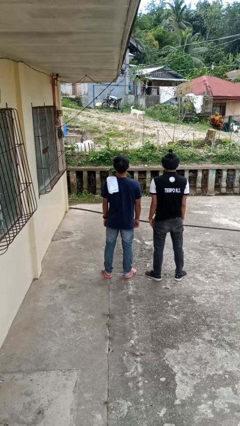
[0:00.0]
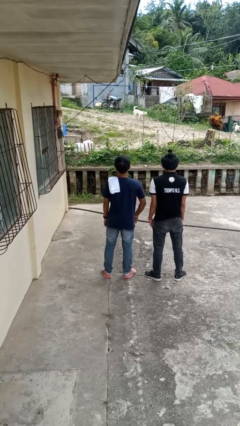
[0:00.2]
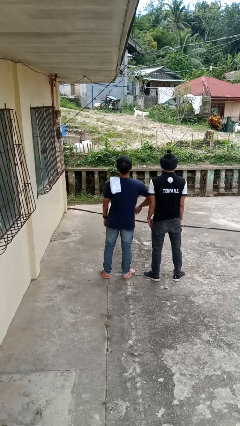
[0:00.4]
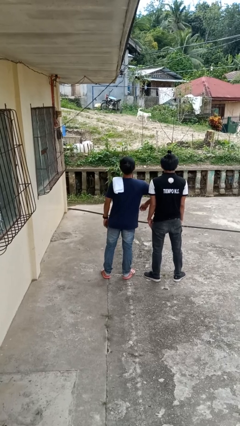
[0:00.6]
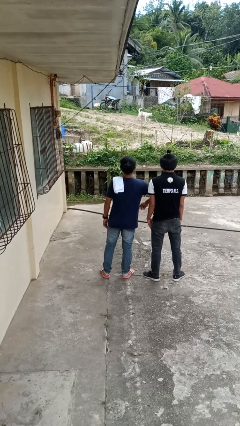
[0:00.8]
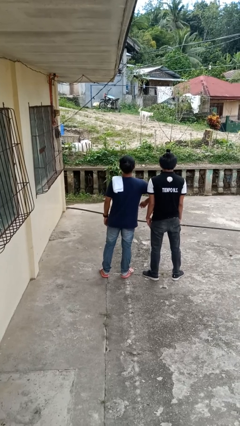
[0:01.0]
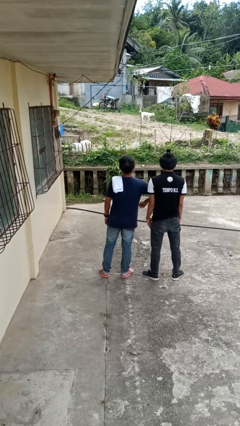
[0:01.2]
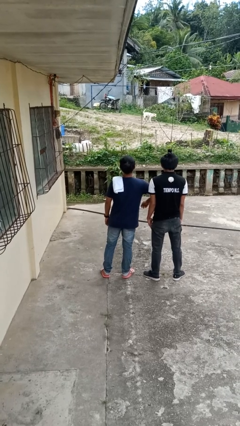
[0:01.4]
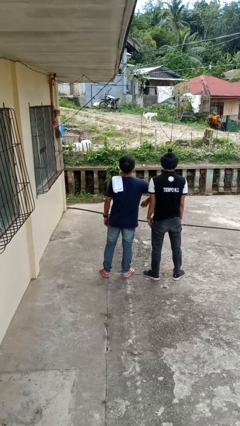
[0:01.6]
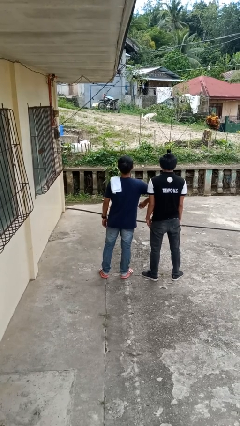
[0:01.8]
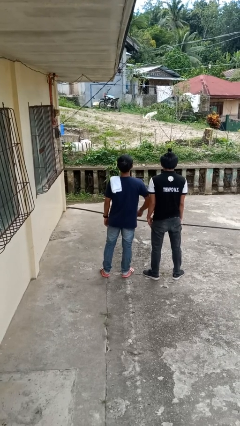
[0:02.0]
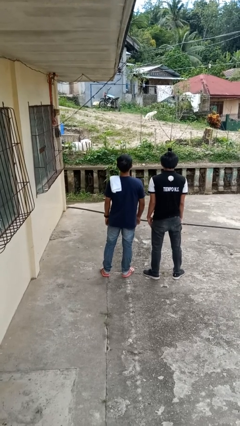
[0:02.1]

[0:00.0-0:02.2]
person nudges person with elbow
